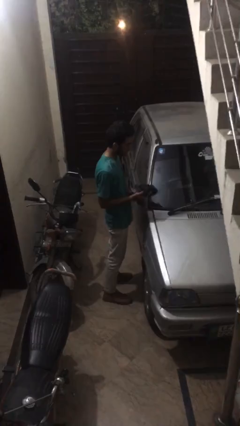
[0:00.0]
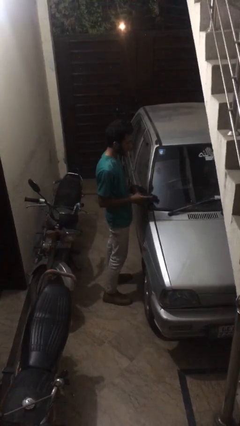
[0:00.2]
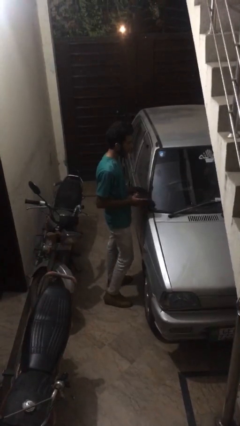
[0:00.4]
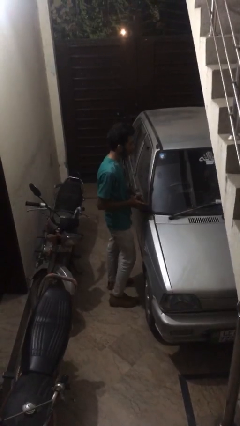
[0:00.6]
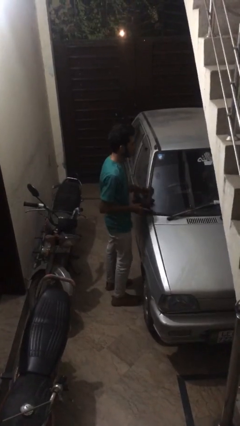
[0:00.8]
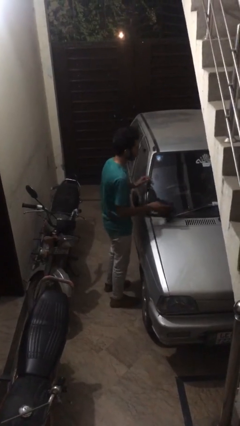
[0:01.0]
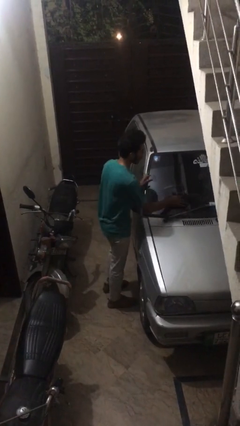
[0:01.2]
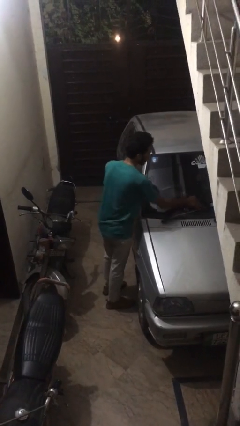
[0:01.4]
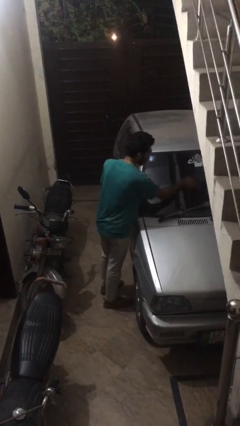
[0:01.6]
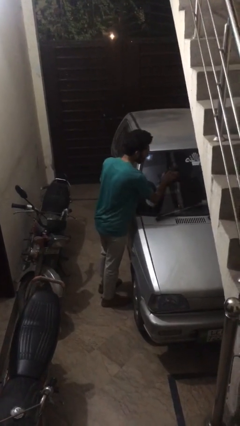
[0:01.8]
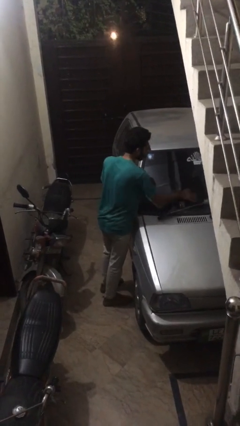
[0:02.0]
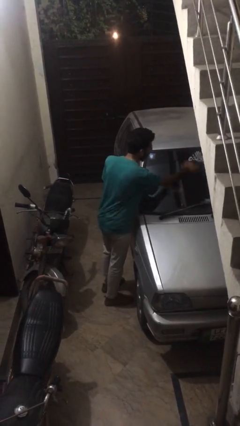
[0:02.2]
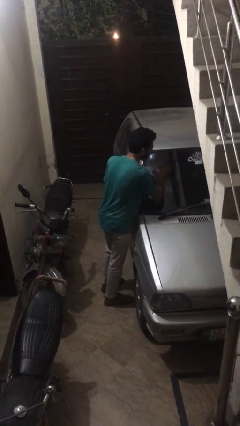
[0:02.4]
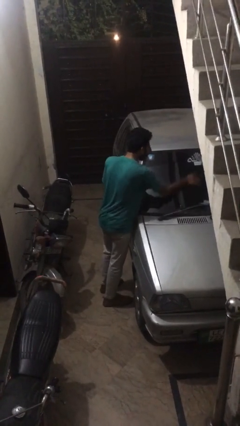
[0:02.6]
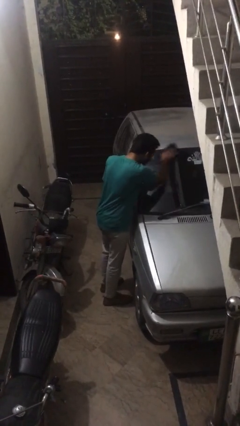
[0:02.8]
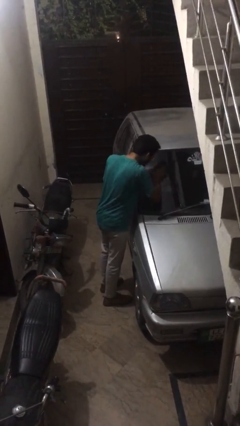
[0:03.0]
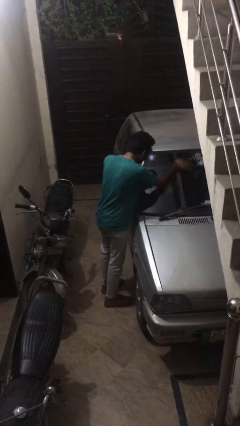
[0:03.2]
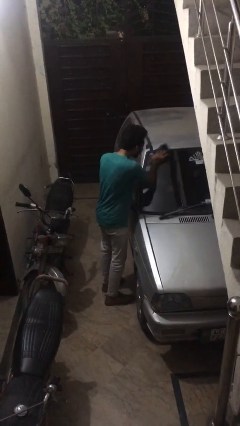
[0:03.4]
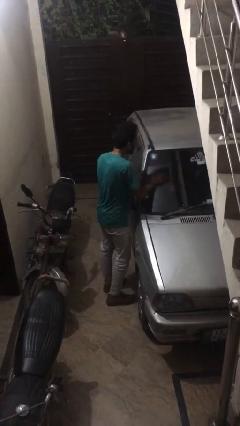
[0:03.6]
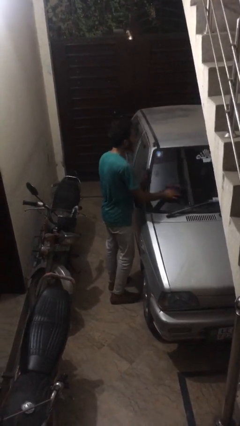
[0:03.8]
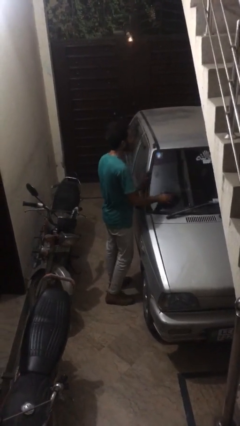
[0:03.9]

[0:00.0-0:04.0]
person polishes car with rag

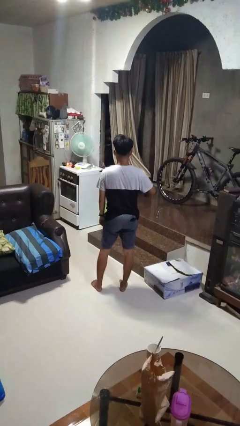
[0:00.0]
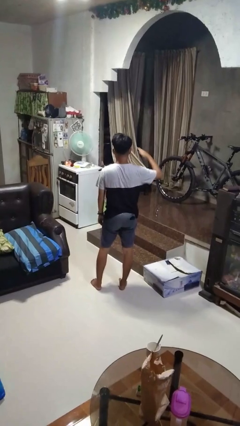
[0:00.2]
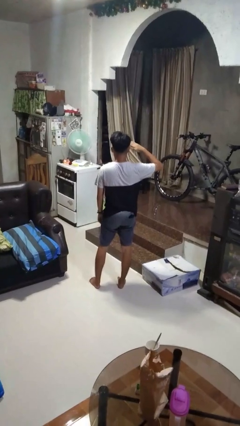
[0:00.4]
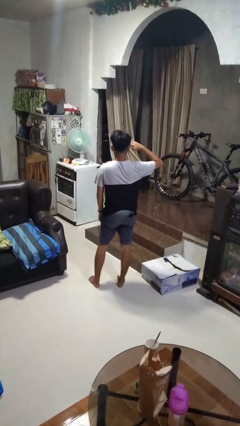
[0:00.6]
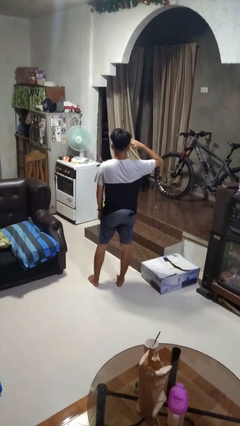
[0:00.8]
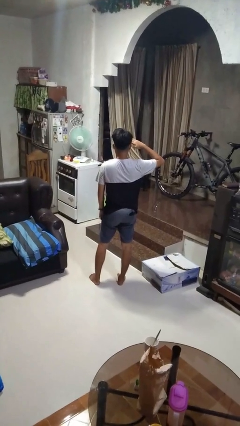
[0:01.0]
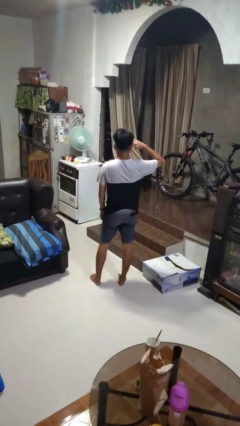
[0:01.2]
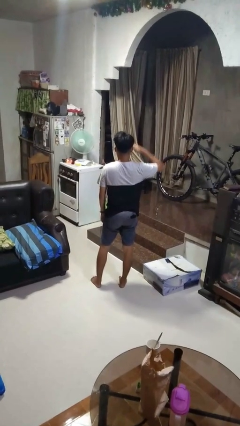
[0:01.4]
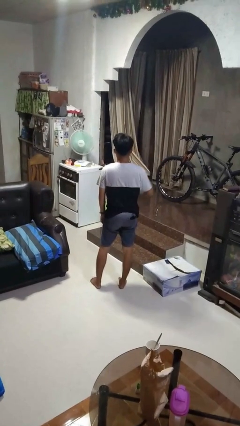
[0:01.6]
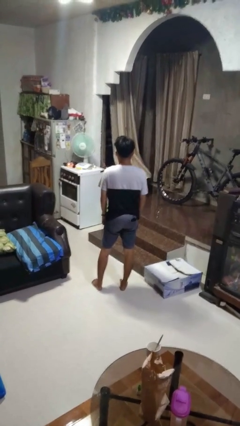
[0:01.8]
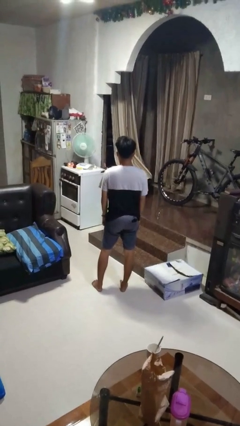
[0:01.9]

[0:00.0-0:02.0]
person salutes

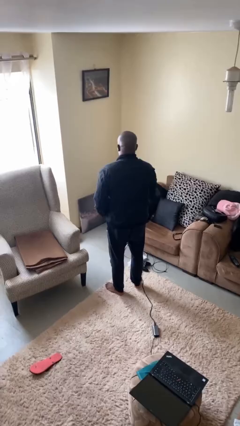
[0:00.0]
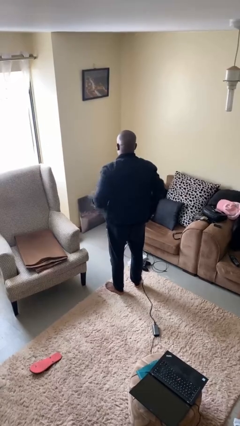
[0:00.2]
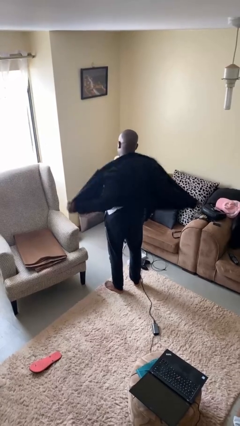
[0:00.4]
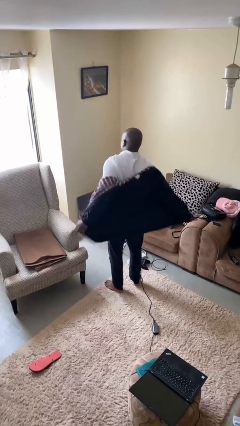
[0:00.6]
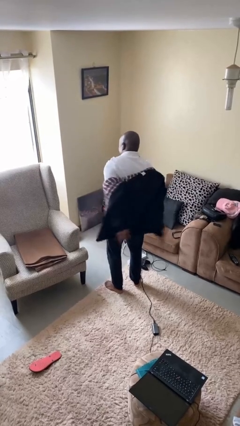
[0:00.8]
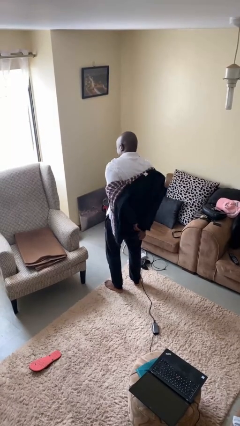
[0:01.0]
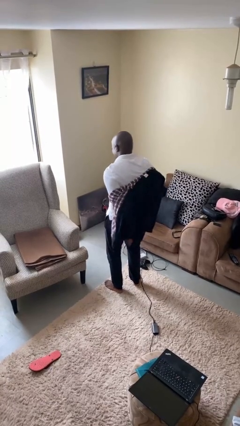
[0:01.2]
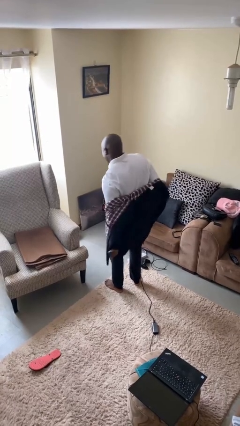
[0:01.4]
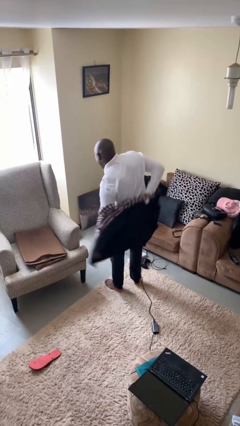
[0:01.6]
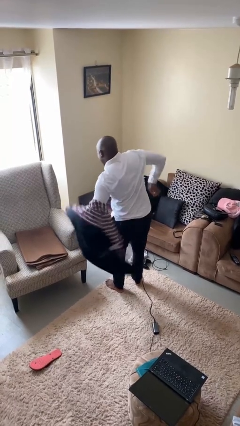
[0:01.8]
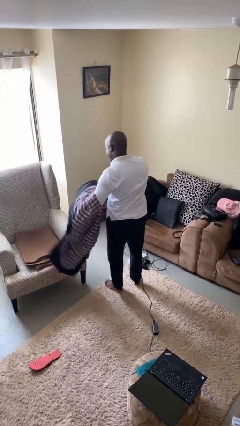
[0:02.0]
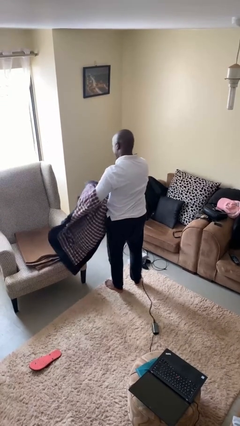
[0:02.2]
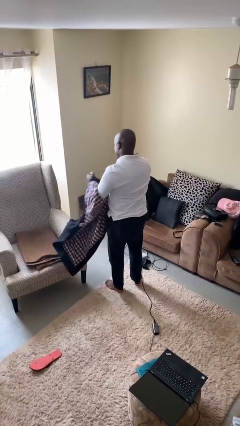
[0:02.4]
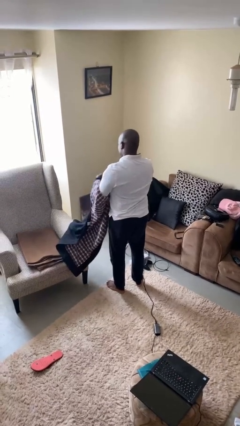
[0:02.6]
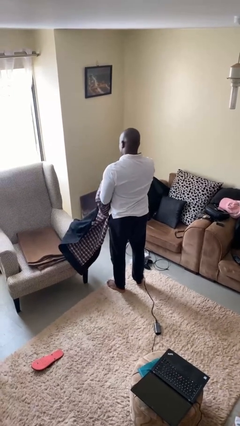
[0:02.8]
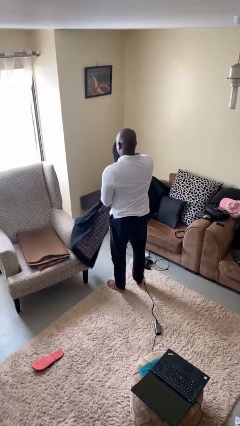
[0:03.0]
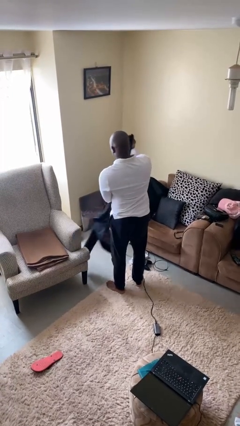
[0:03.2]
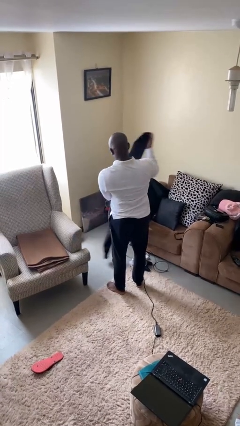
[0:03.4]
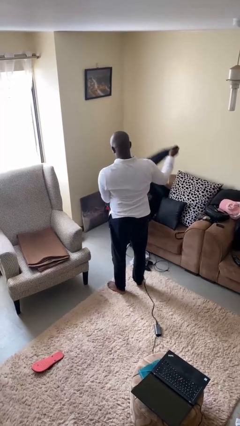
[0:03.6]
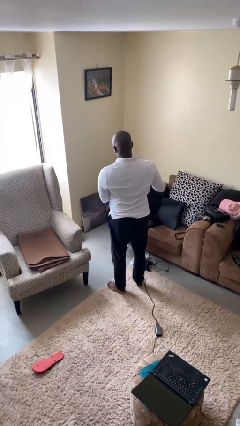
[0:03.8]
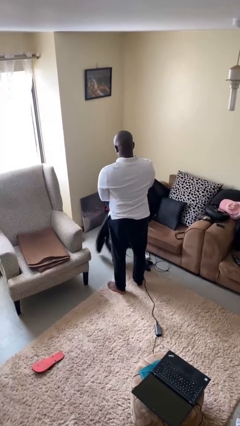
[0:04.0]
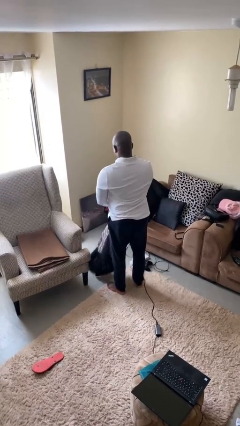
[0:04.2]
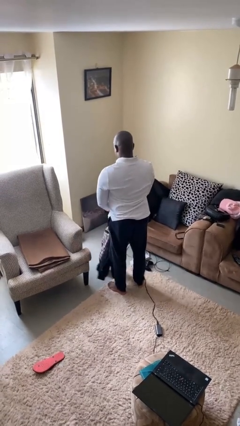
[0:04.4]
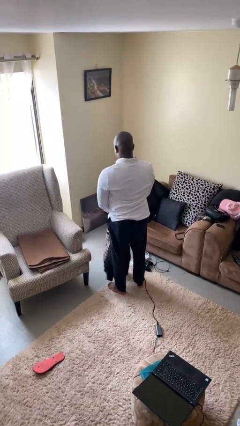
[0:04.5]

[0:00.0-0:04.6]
person takes off jacket

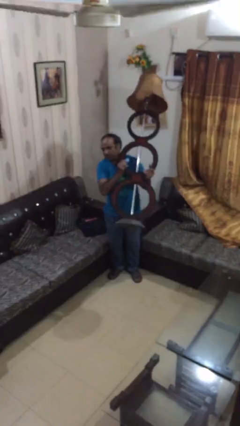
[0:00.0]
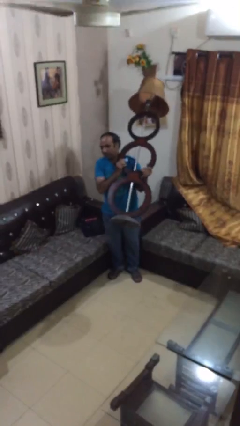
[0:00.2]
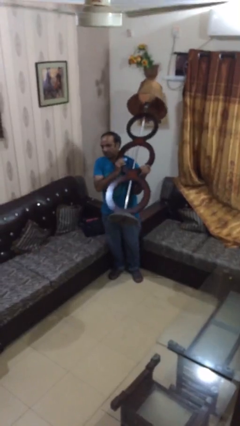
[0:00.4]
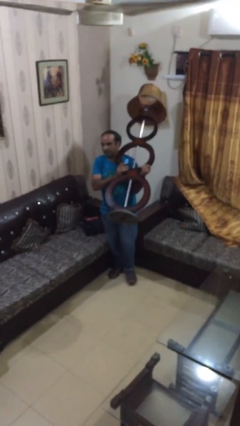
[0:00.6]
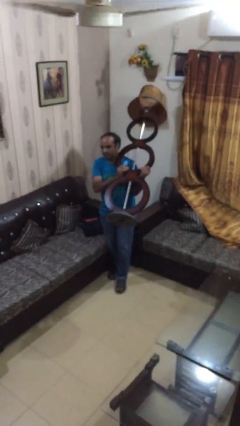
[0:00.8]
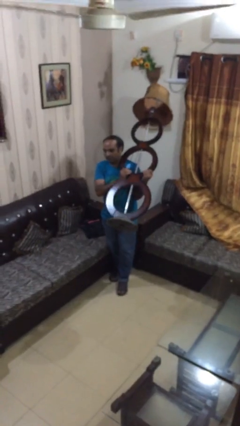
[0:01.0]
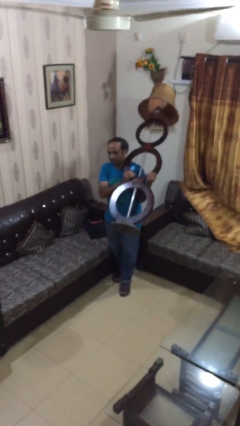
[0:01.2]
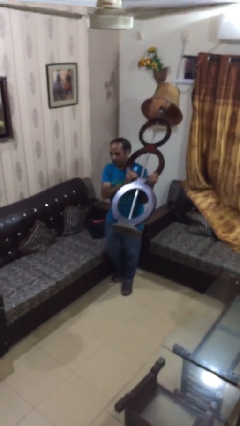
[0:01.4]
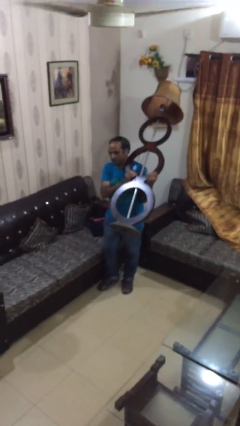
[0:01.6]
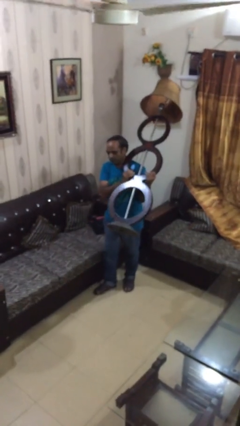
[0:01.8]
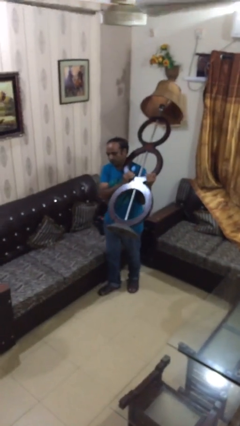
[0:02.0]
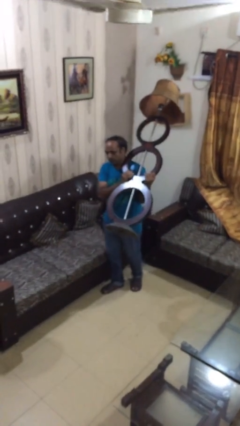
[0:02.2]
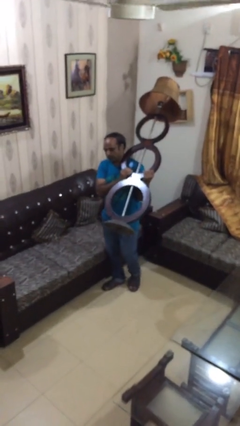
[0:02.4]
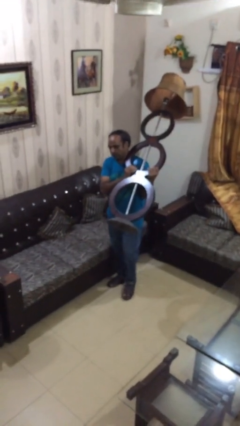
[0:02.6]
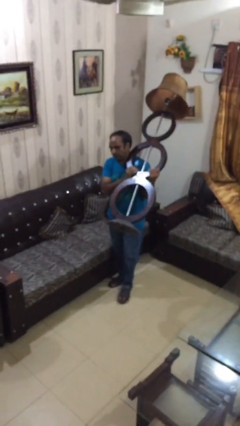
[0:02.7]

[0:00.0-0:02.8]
person carries heavy object

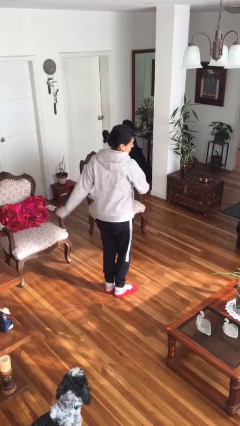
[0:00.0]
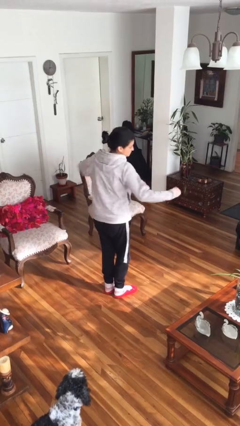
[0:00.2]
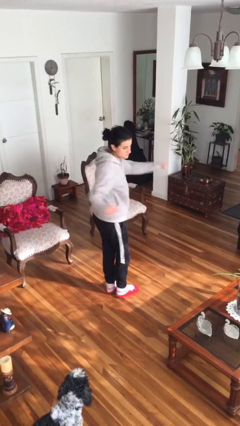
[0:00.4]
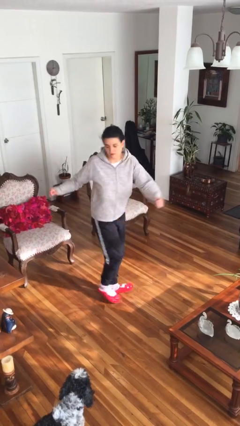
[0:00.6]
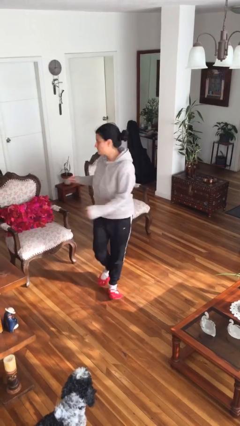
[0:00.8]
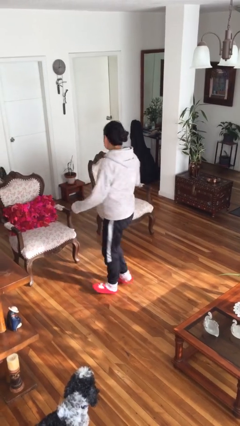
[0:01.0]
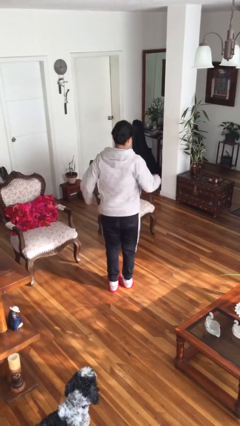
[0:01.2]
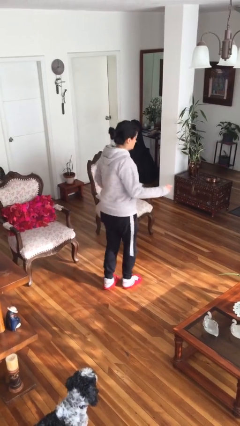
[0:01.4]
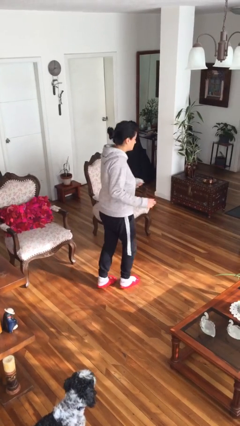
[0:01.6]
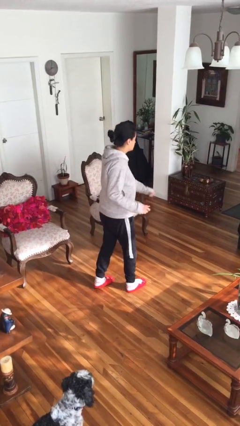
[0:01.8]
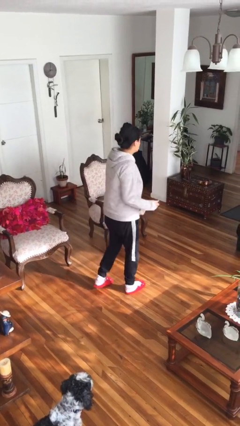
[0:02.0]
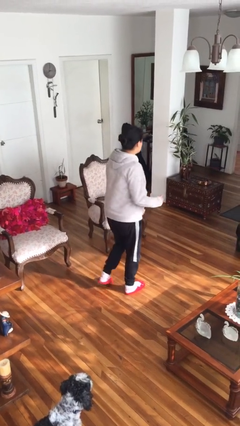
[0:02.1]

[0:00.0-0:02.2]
person twirls
